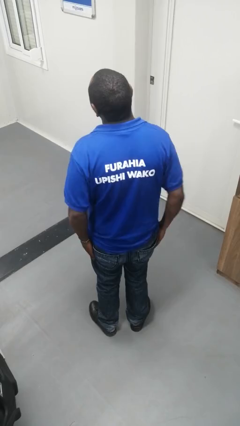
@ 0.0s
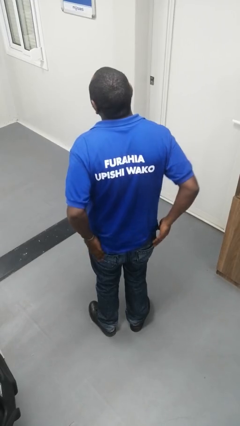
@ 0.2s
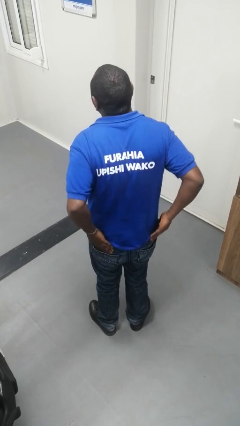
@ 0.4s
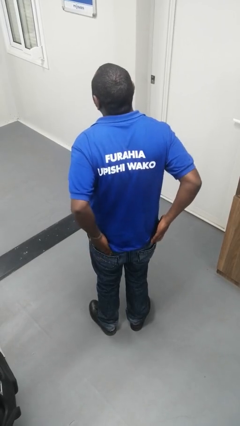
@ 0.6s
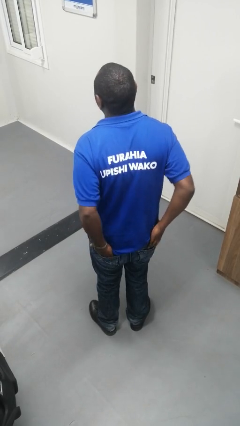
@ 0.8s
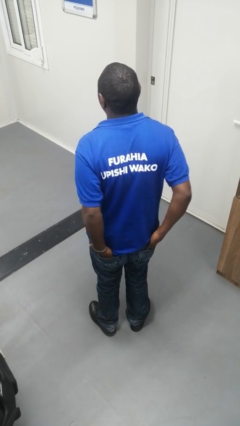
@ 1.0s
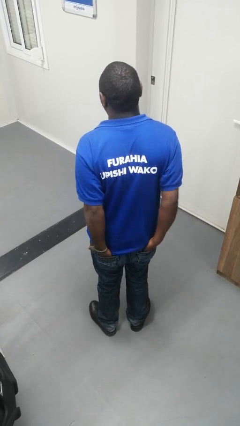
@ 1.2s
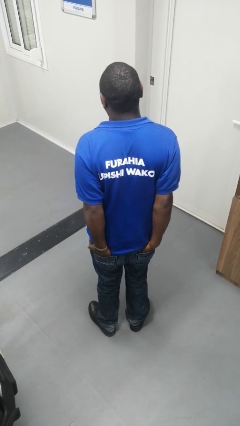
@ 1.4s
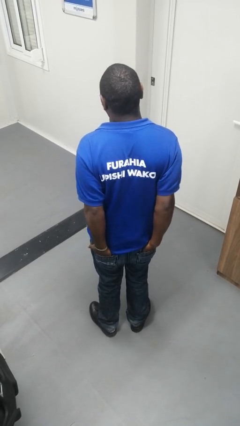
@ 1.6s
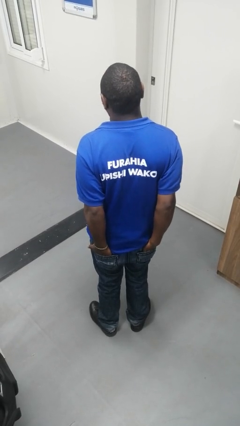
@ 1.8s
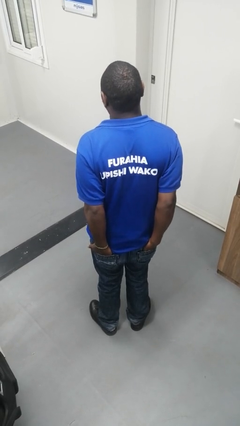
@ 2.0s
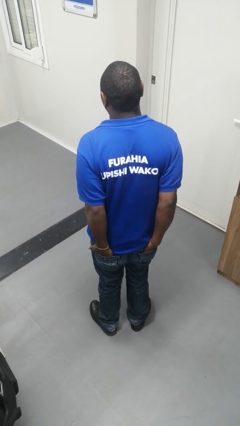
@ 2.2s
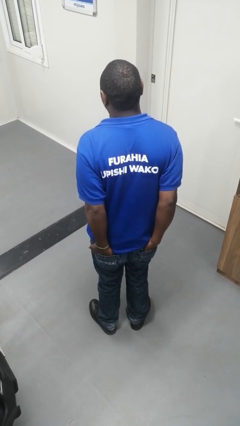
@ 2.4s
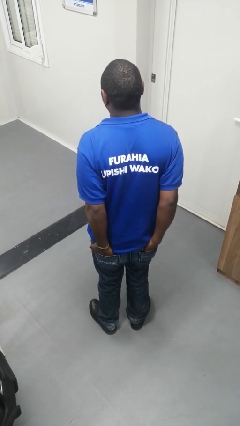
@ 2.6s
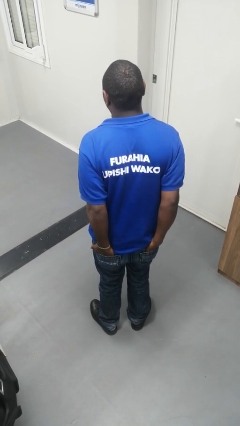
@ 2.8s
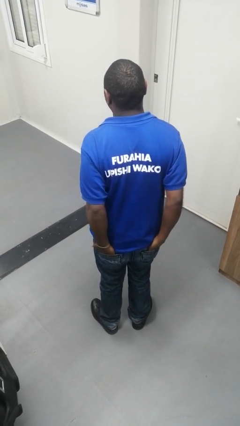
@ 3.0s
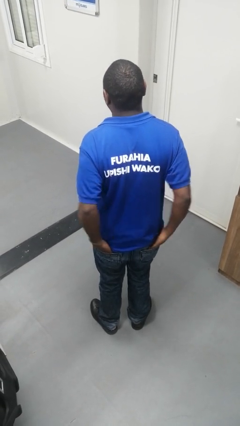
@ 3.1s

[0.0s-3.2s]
person puts hands in back pockets

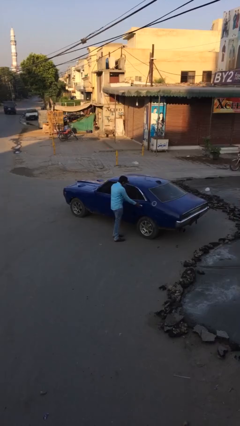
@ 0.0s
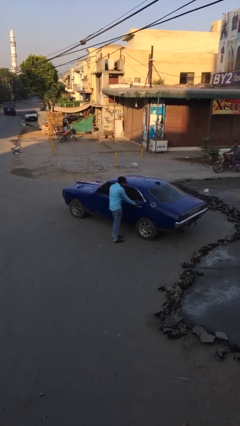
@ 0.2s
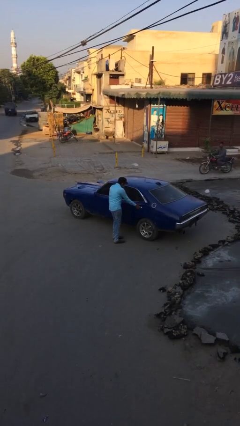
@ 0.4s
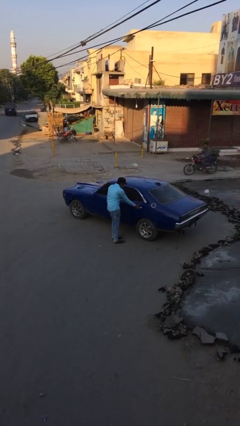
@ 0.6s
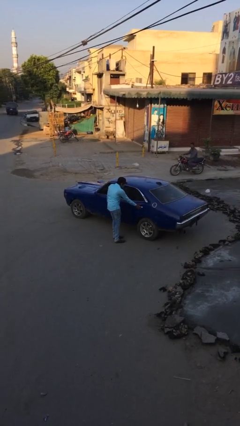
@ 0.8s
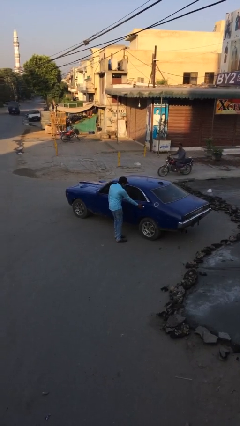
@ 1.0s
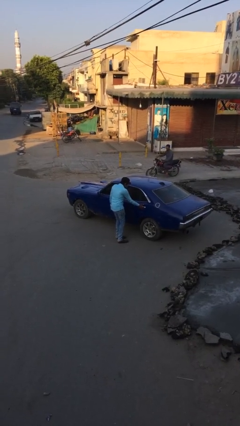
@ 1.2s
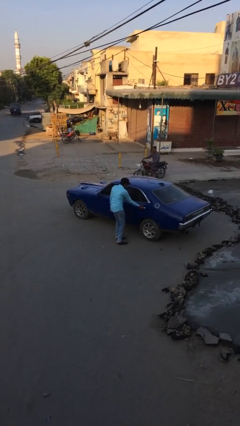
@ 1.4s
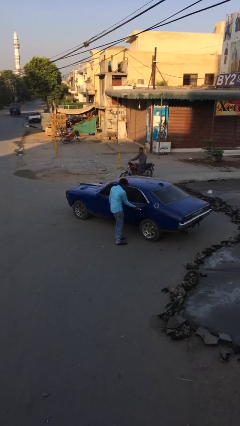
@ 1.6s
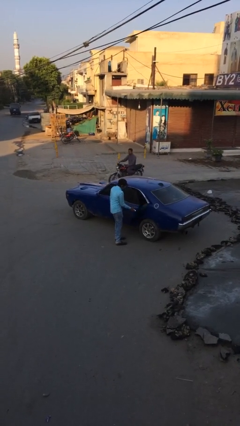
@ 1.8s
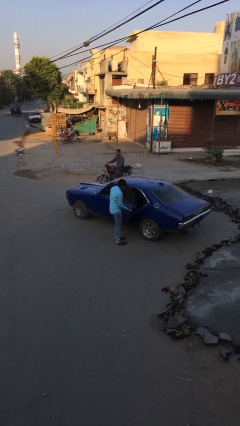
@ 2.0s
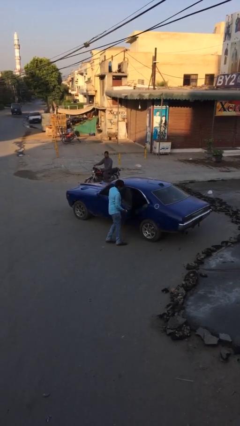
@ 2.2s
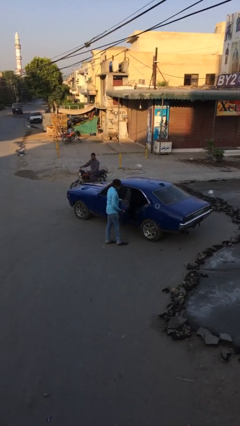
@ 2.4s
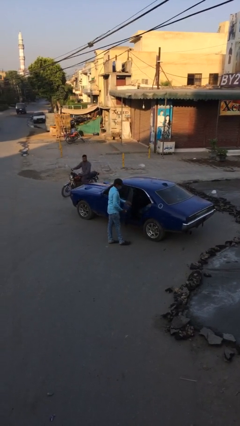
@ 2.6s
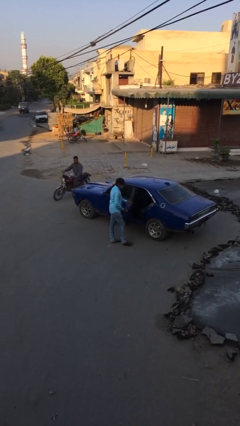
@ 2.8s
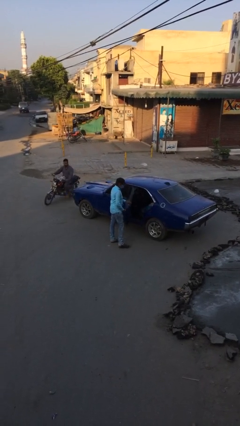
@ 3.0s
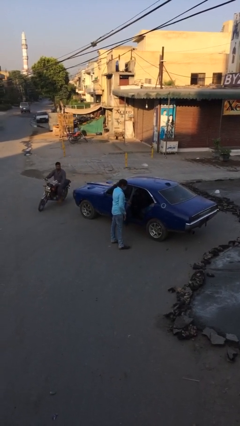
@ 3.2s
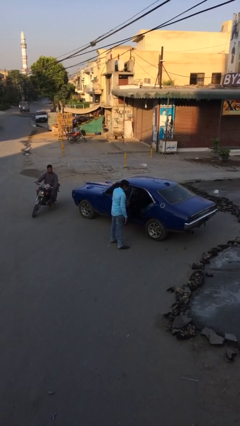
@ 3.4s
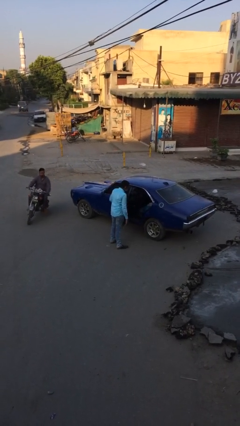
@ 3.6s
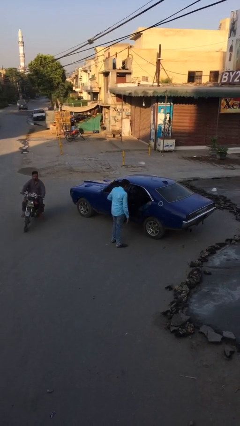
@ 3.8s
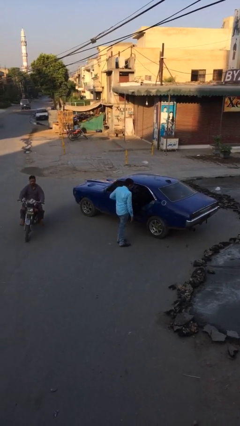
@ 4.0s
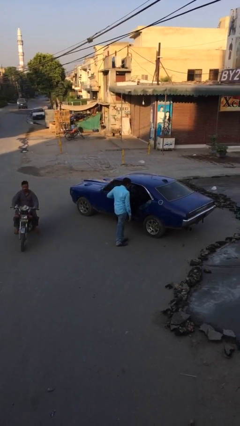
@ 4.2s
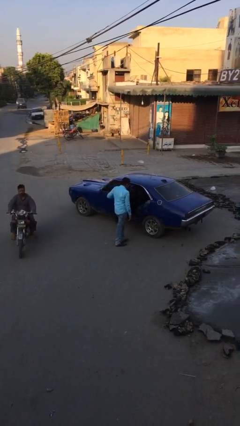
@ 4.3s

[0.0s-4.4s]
person opens car door

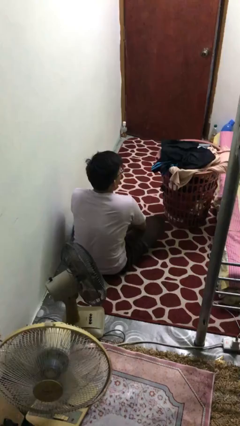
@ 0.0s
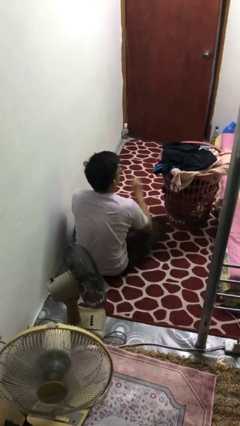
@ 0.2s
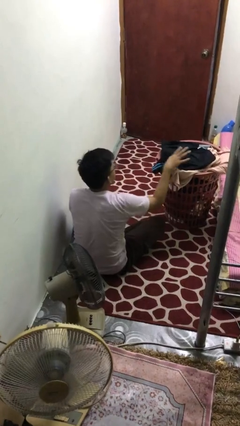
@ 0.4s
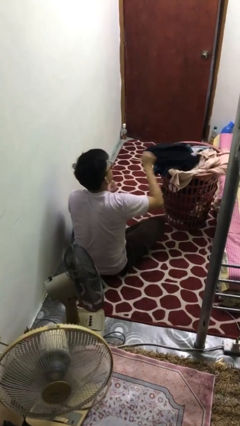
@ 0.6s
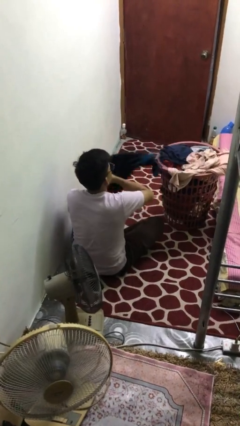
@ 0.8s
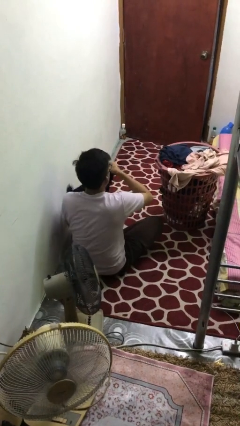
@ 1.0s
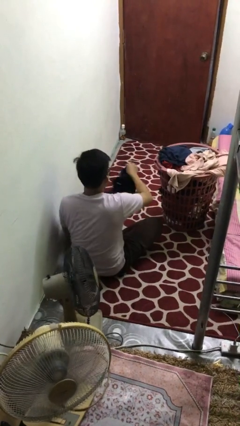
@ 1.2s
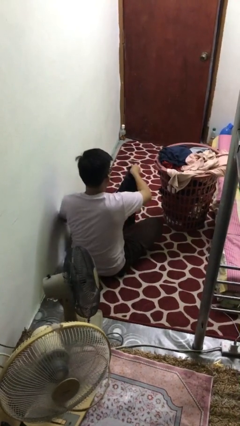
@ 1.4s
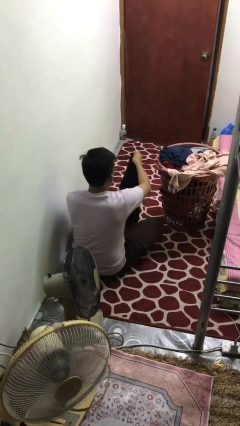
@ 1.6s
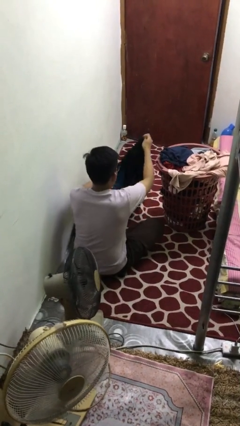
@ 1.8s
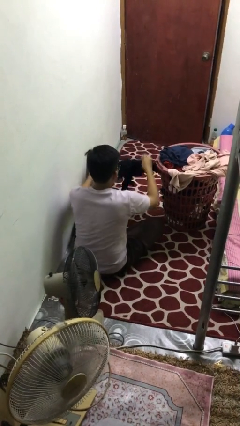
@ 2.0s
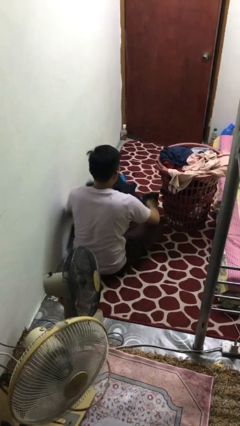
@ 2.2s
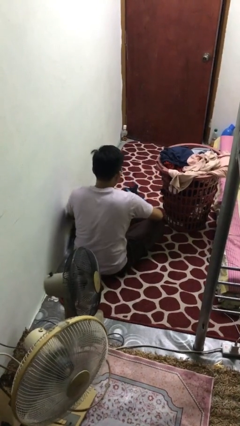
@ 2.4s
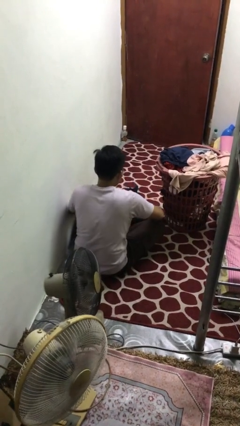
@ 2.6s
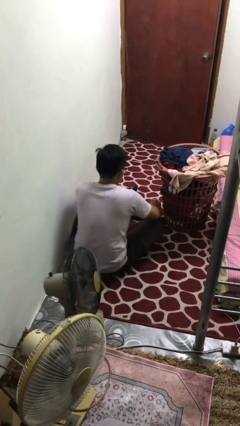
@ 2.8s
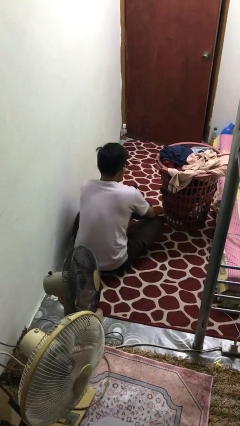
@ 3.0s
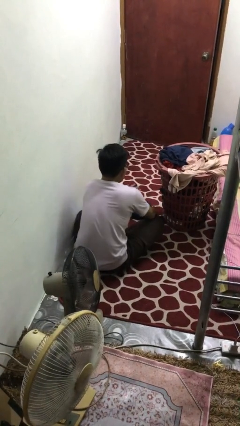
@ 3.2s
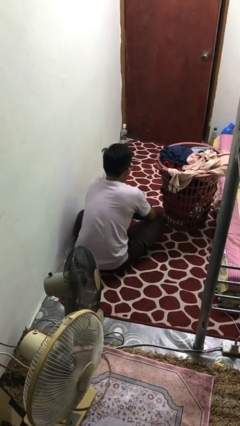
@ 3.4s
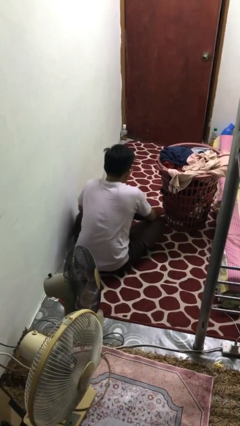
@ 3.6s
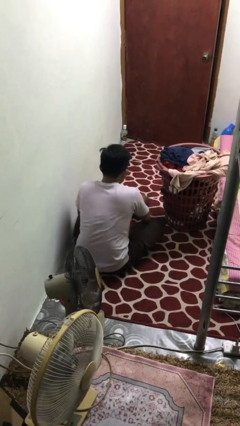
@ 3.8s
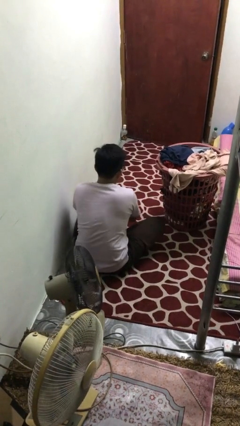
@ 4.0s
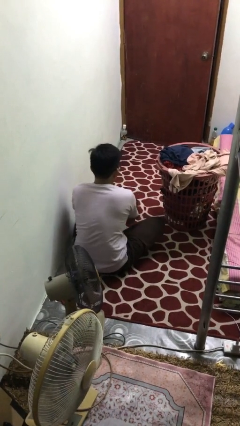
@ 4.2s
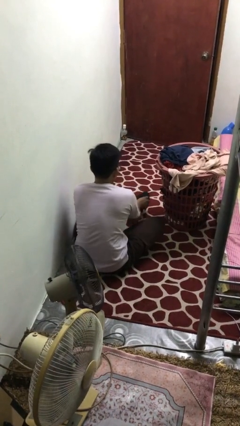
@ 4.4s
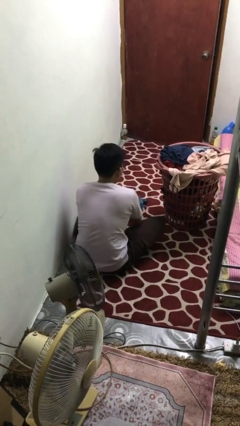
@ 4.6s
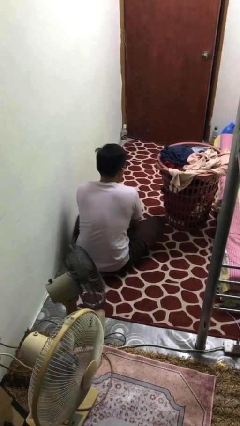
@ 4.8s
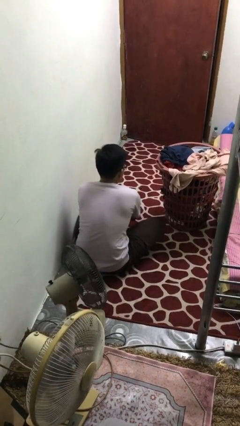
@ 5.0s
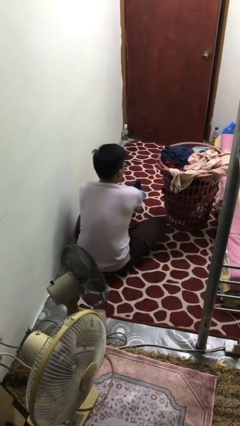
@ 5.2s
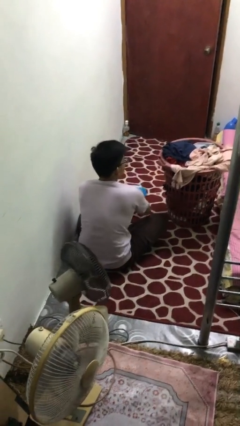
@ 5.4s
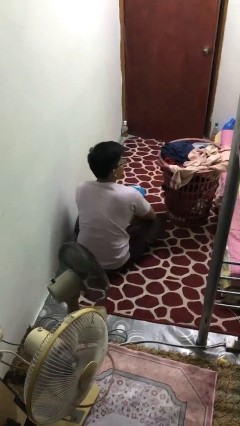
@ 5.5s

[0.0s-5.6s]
person folds shirt

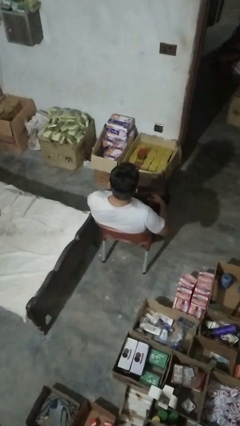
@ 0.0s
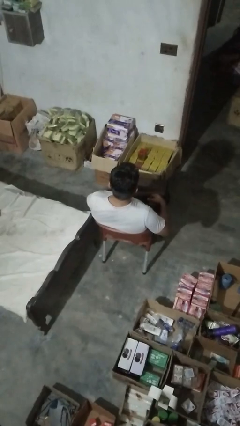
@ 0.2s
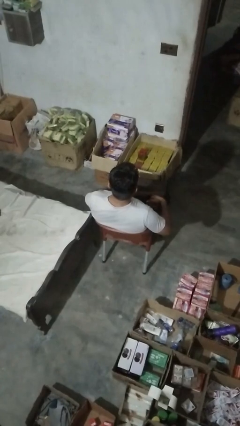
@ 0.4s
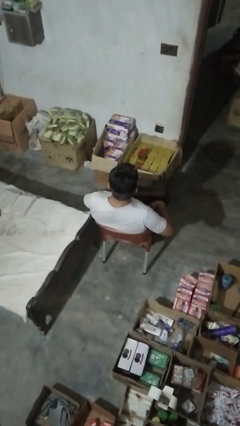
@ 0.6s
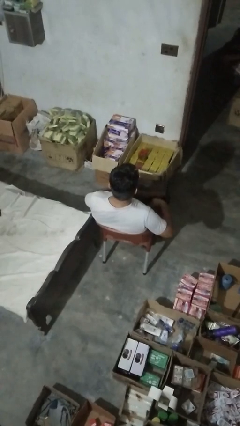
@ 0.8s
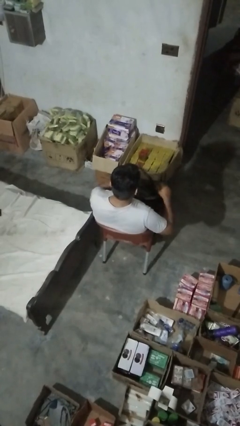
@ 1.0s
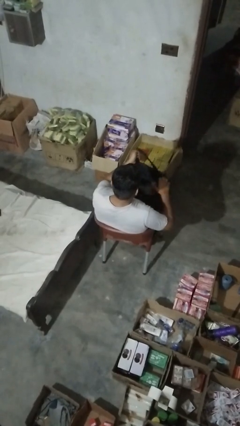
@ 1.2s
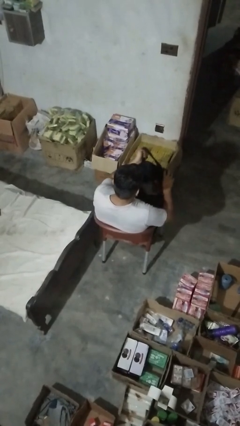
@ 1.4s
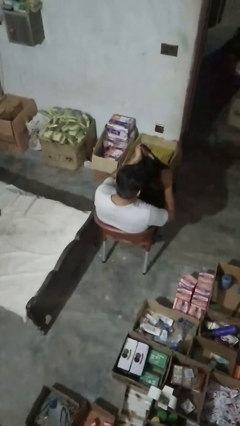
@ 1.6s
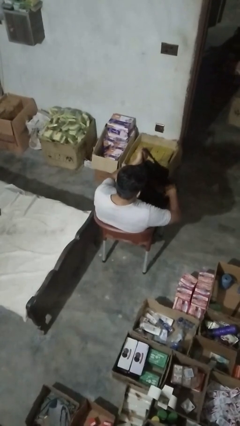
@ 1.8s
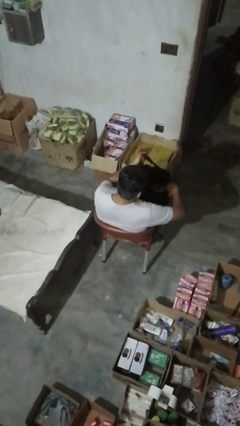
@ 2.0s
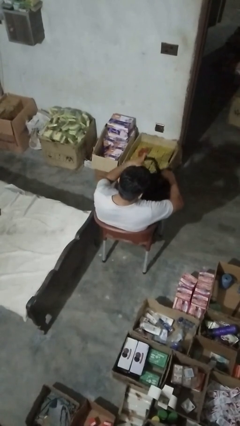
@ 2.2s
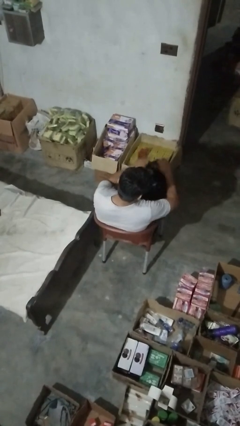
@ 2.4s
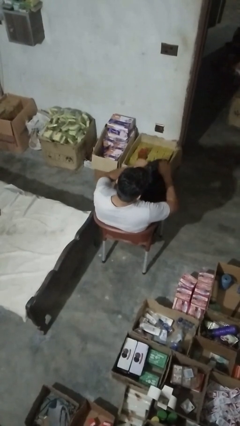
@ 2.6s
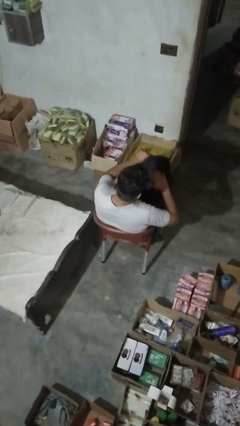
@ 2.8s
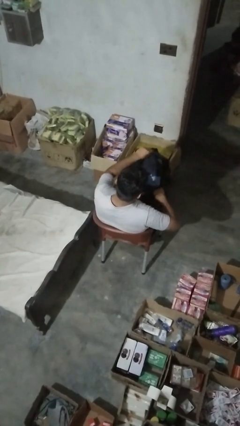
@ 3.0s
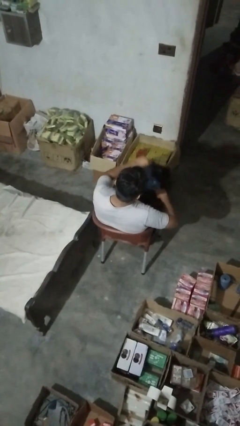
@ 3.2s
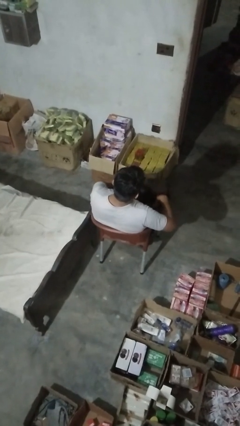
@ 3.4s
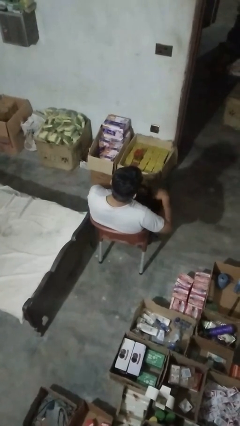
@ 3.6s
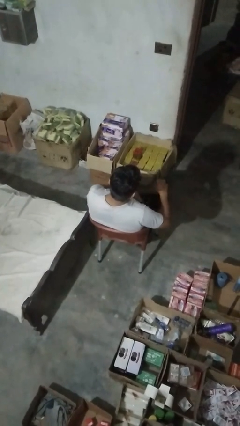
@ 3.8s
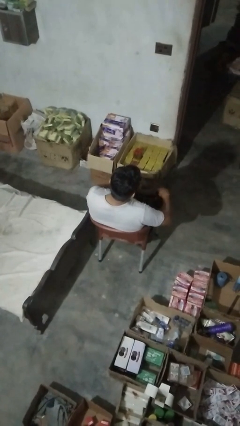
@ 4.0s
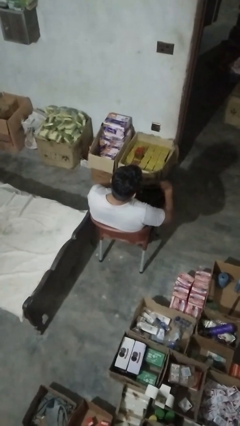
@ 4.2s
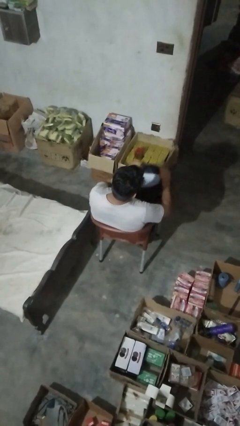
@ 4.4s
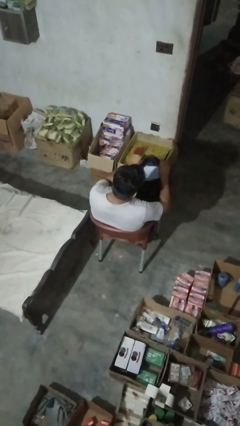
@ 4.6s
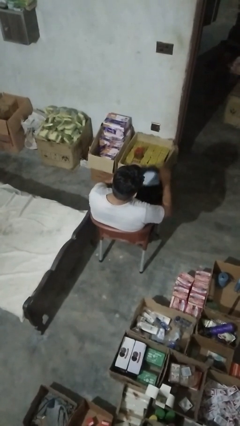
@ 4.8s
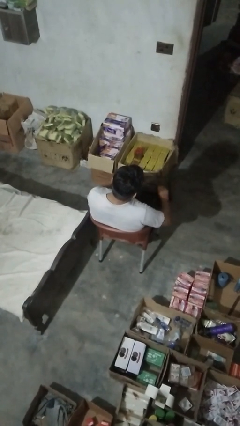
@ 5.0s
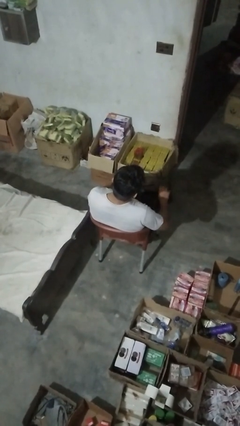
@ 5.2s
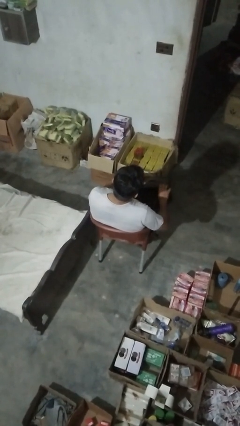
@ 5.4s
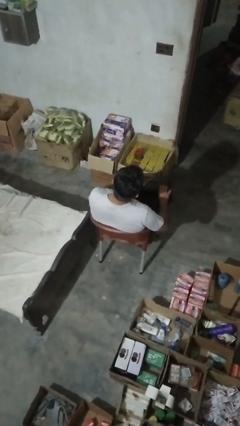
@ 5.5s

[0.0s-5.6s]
person searches in bag
